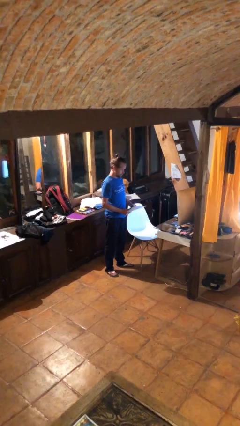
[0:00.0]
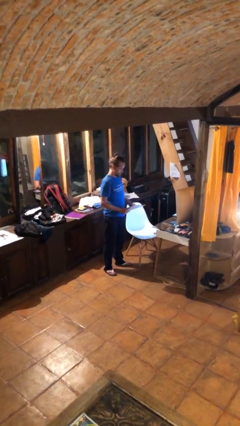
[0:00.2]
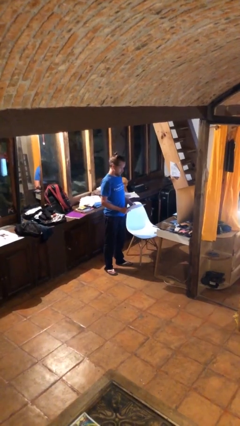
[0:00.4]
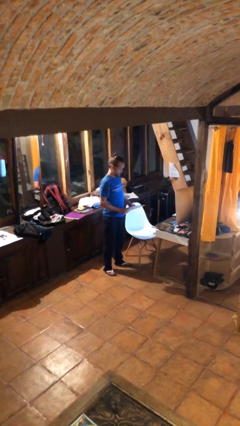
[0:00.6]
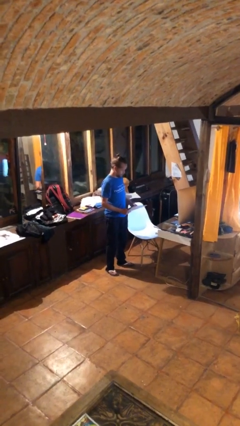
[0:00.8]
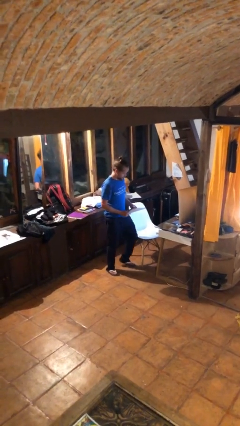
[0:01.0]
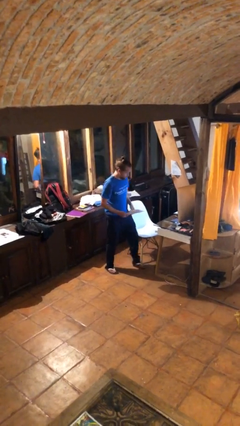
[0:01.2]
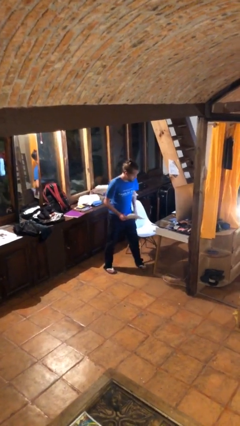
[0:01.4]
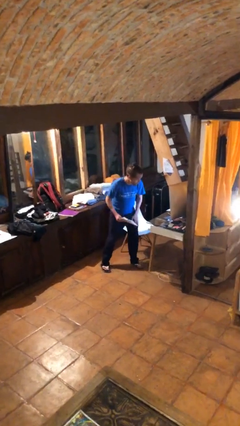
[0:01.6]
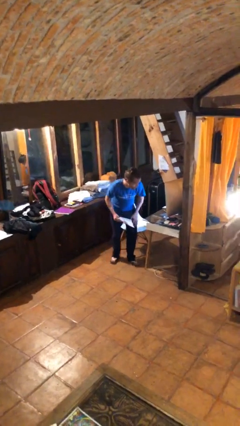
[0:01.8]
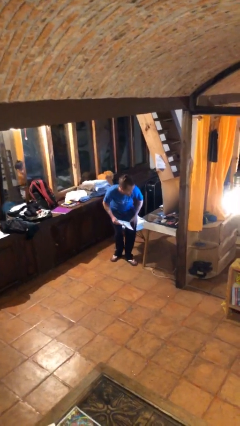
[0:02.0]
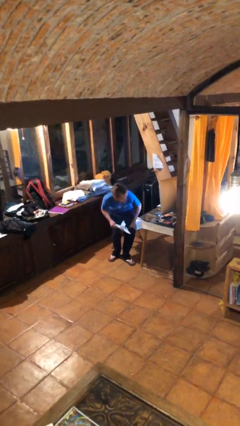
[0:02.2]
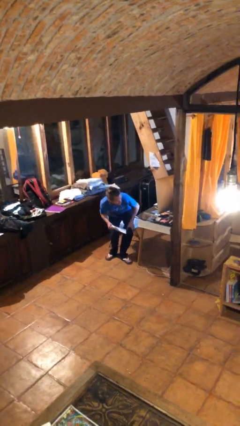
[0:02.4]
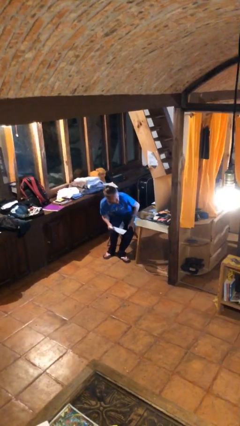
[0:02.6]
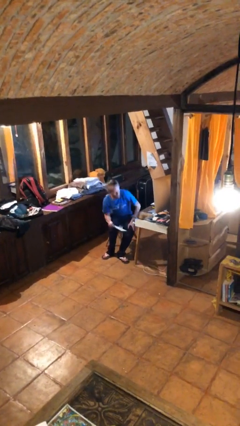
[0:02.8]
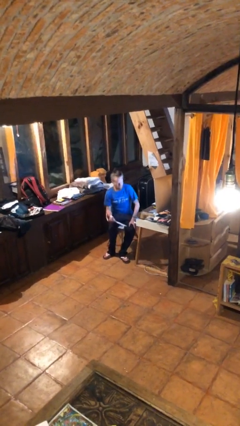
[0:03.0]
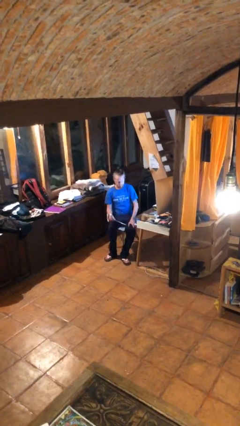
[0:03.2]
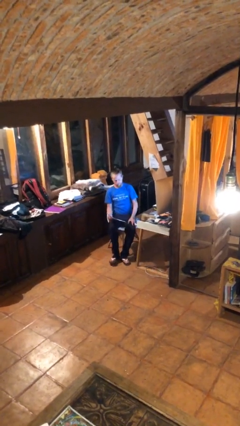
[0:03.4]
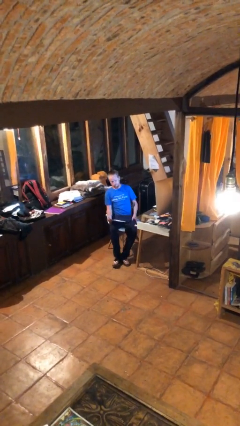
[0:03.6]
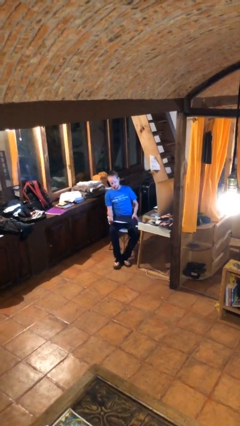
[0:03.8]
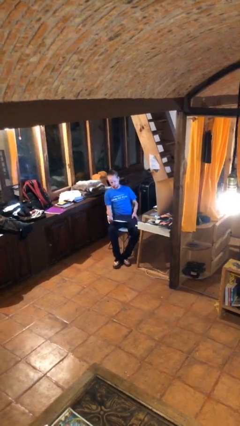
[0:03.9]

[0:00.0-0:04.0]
person sits down

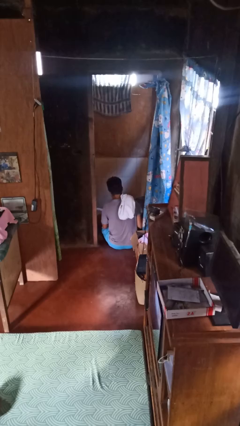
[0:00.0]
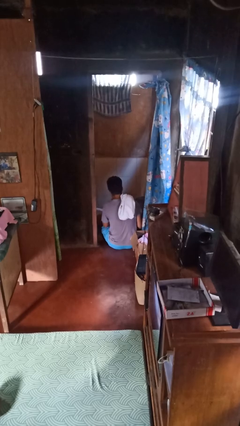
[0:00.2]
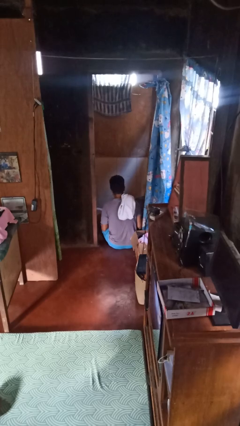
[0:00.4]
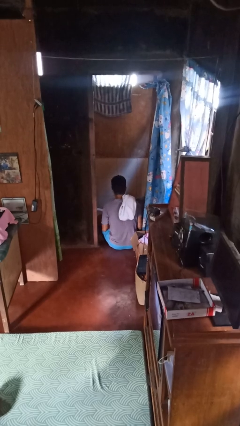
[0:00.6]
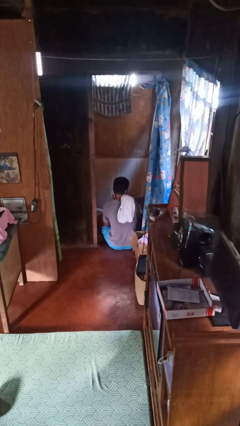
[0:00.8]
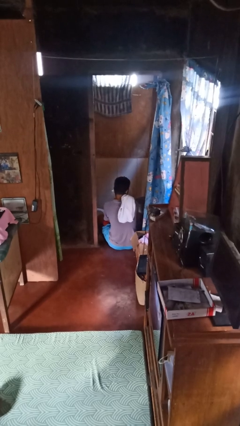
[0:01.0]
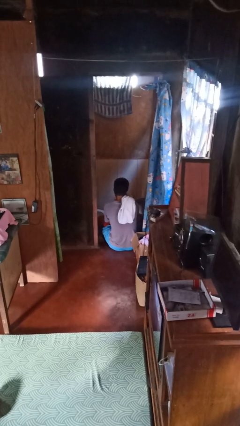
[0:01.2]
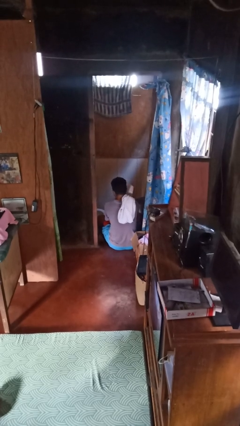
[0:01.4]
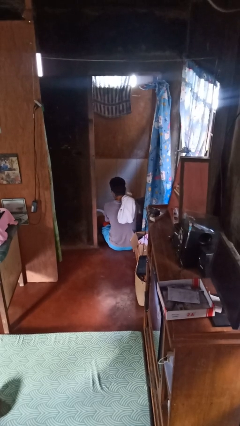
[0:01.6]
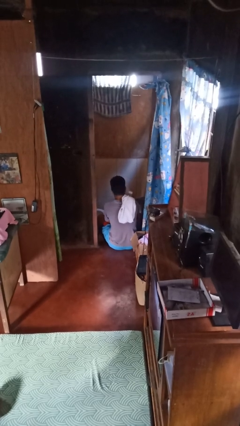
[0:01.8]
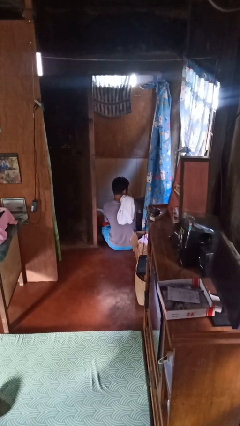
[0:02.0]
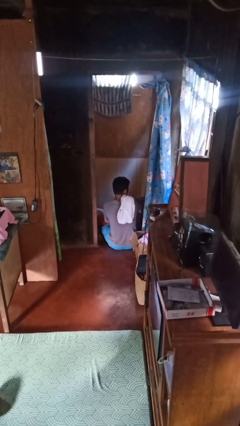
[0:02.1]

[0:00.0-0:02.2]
person dries face with towel

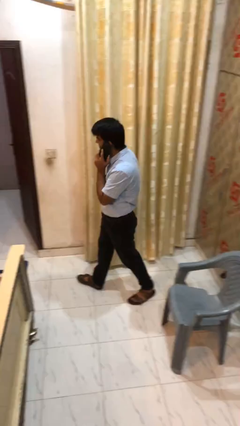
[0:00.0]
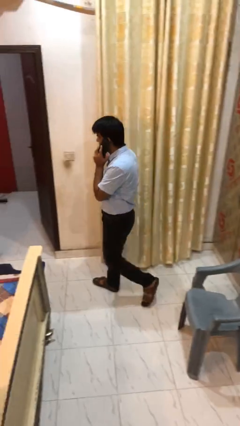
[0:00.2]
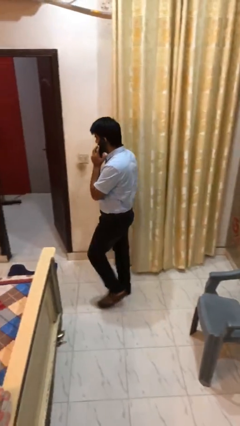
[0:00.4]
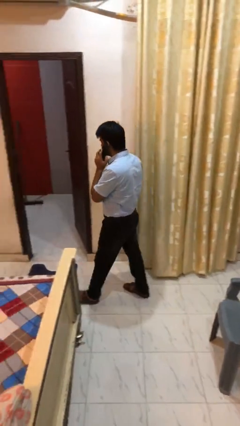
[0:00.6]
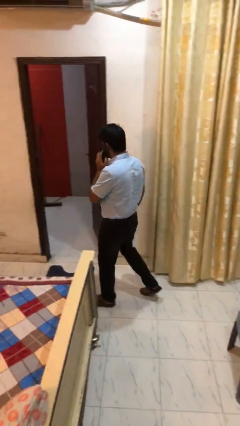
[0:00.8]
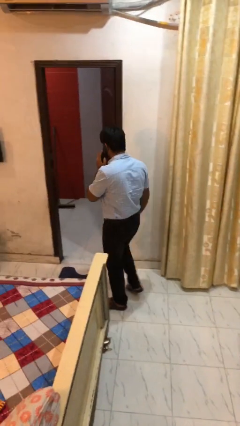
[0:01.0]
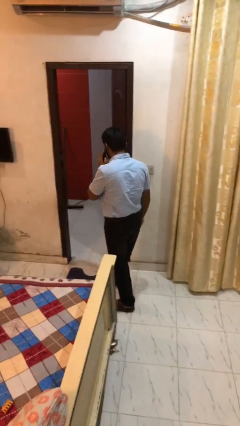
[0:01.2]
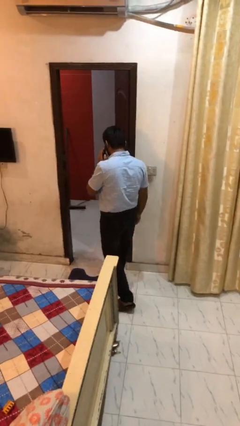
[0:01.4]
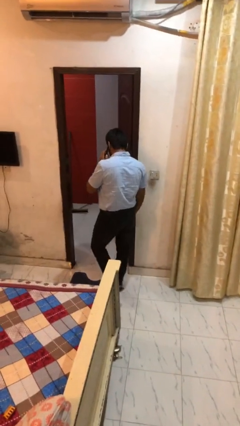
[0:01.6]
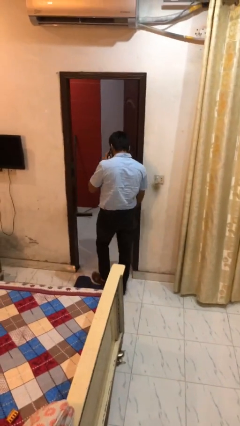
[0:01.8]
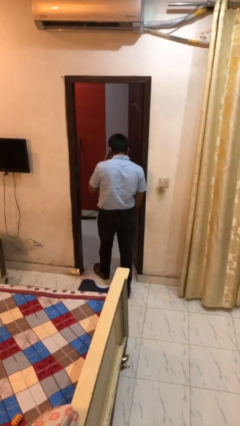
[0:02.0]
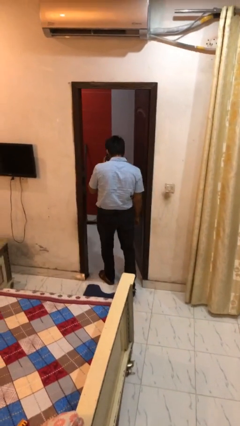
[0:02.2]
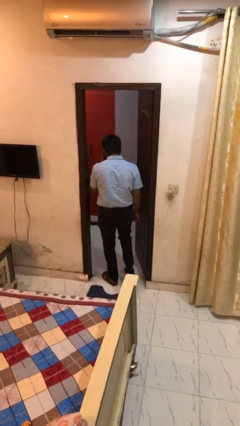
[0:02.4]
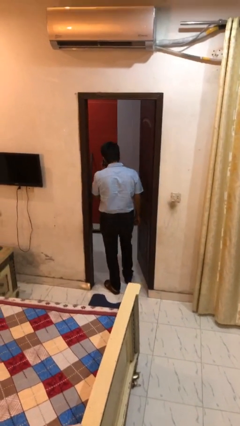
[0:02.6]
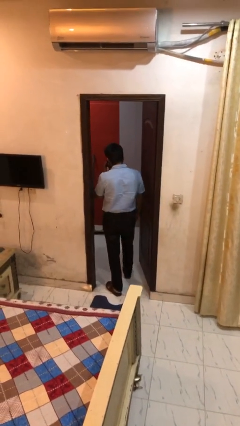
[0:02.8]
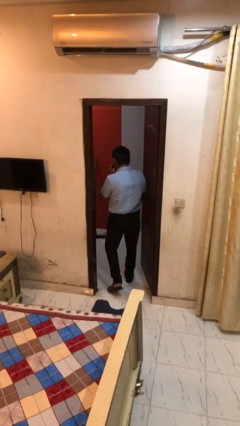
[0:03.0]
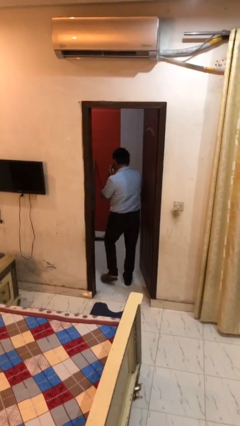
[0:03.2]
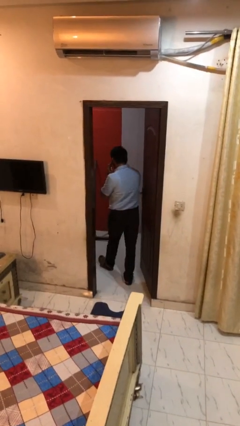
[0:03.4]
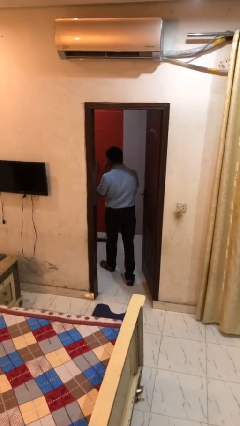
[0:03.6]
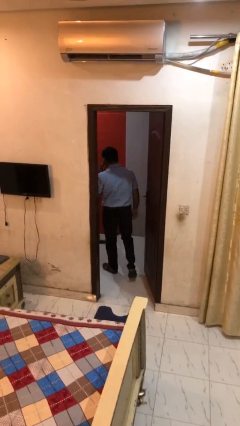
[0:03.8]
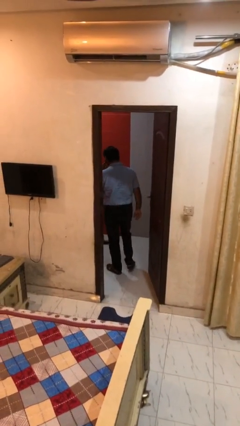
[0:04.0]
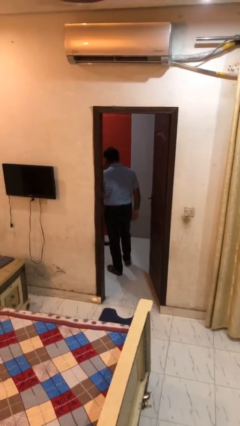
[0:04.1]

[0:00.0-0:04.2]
person exits scene through structure

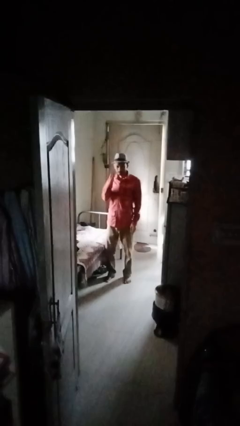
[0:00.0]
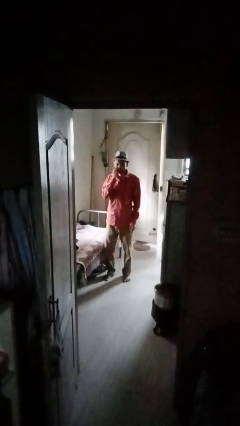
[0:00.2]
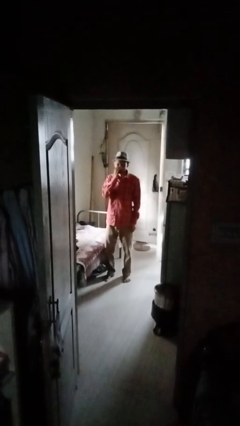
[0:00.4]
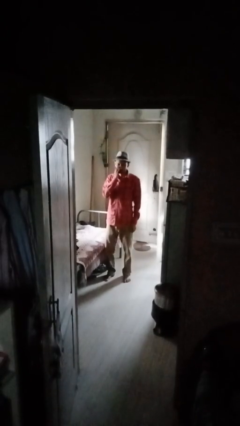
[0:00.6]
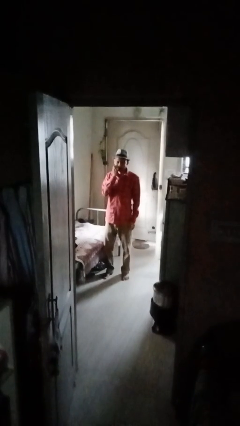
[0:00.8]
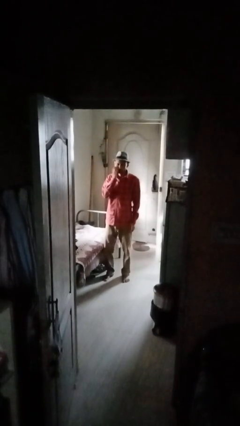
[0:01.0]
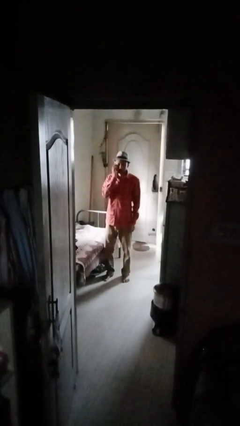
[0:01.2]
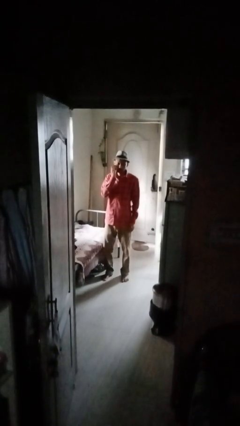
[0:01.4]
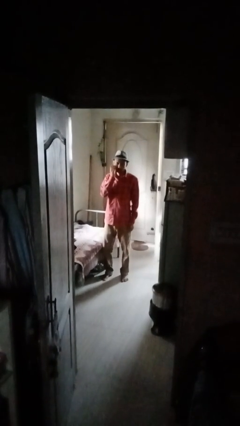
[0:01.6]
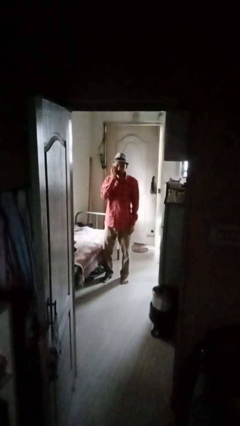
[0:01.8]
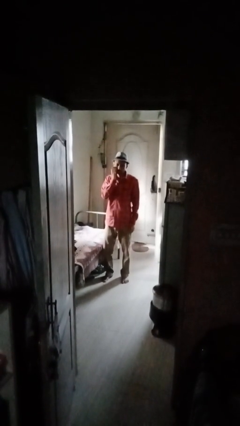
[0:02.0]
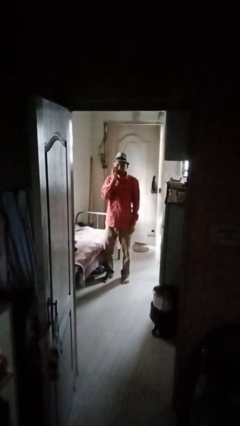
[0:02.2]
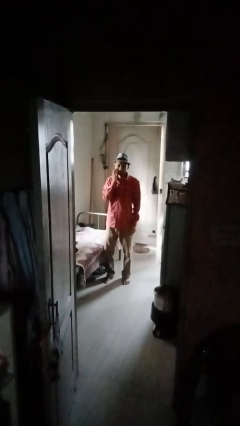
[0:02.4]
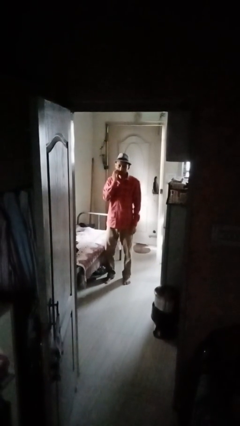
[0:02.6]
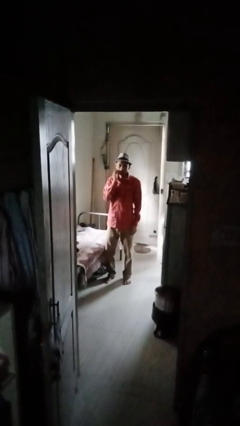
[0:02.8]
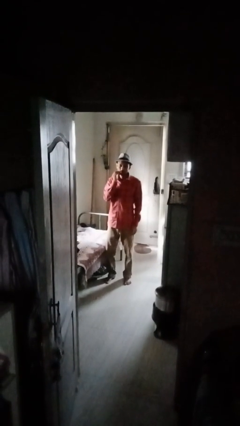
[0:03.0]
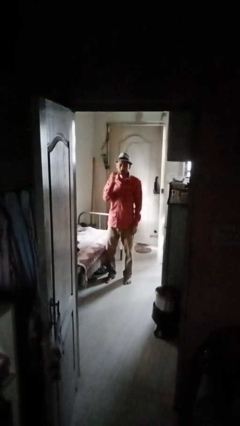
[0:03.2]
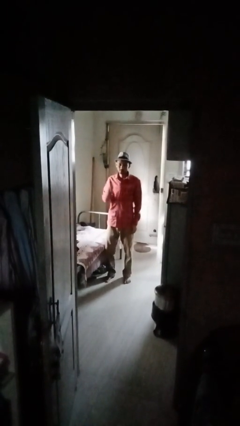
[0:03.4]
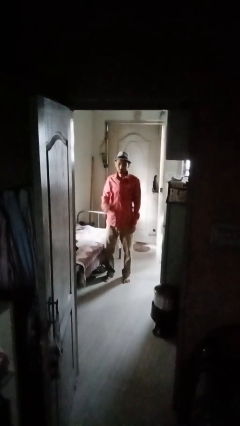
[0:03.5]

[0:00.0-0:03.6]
person scratches face

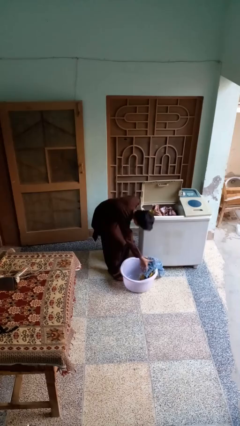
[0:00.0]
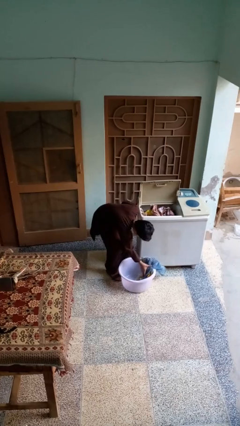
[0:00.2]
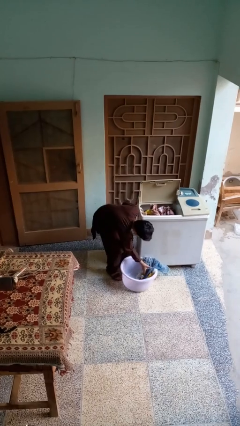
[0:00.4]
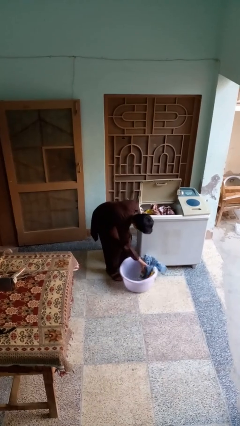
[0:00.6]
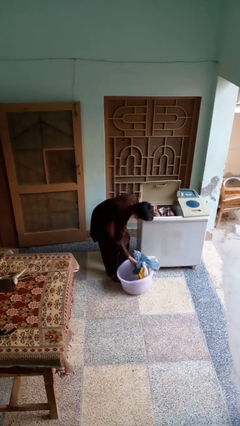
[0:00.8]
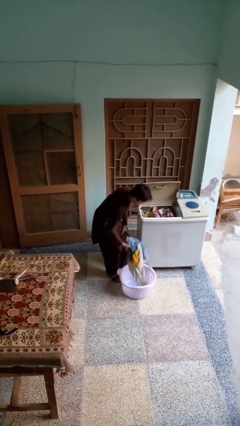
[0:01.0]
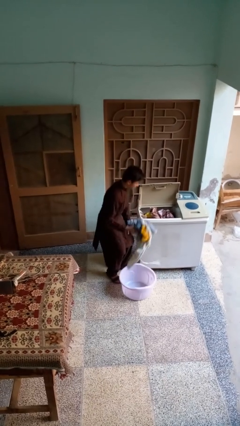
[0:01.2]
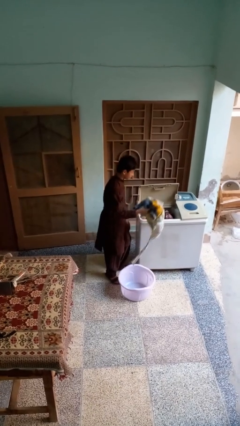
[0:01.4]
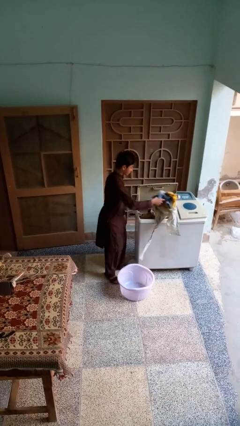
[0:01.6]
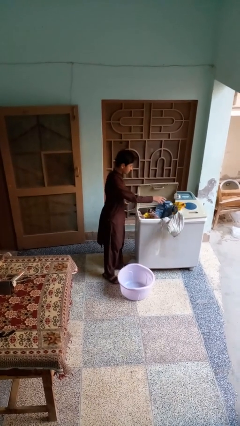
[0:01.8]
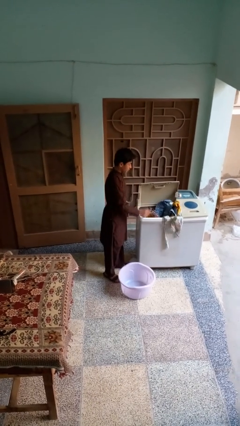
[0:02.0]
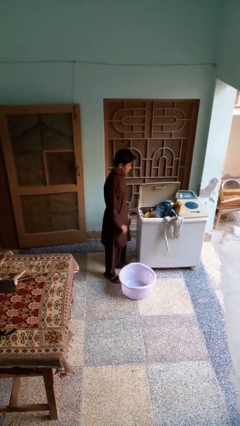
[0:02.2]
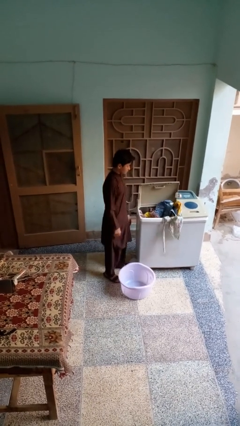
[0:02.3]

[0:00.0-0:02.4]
person unloads clotheswasher

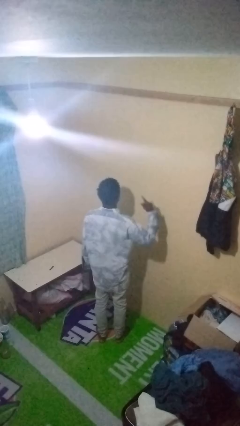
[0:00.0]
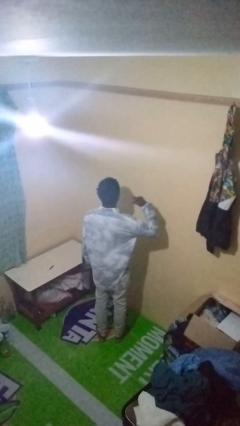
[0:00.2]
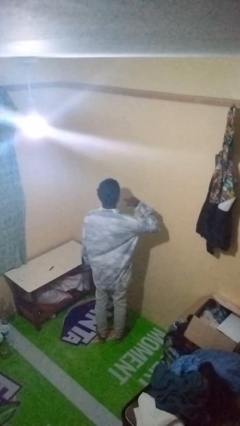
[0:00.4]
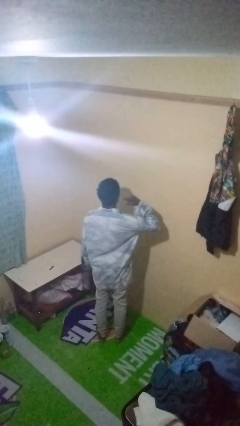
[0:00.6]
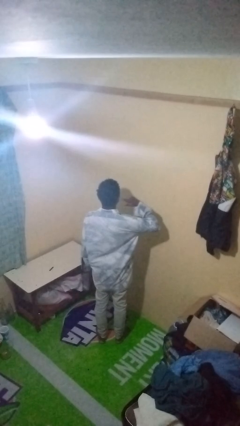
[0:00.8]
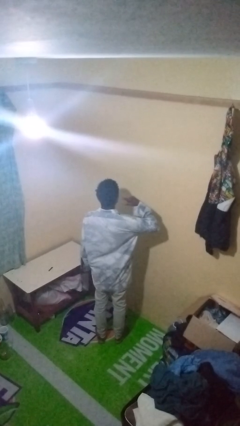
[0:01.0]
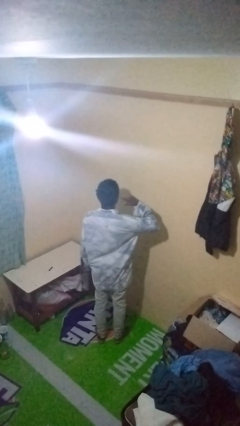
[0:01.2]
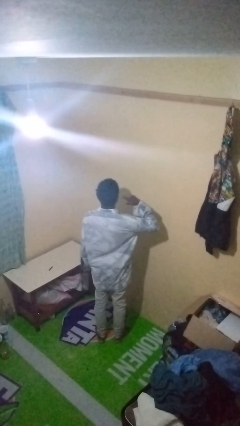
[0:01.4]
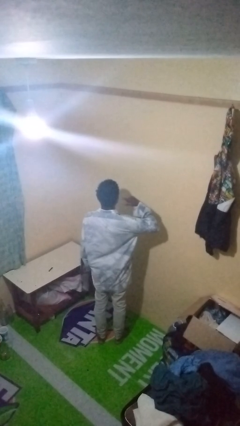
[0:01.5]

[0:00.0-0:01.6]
person gestures listen closely
